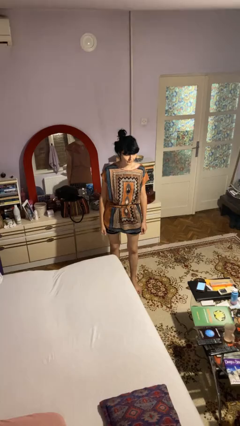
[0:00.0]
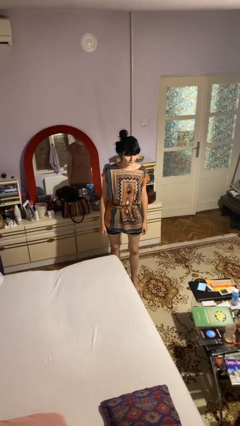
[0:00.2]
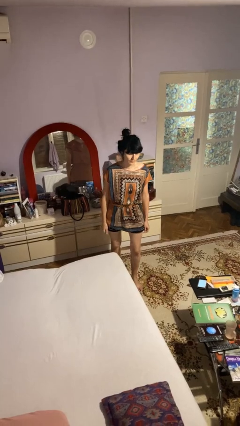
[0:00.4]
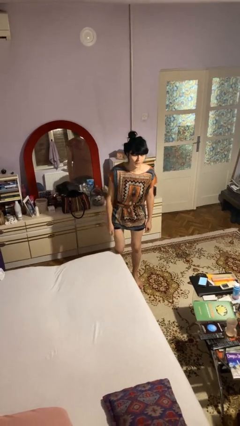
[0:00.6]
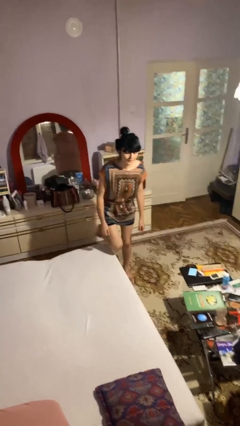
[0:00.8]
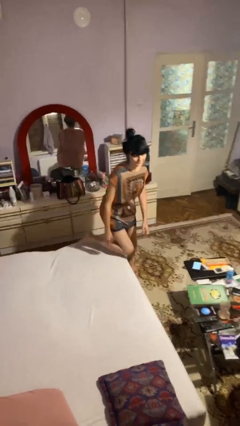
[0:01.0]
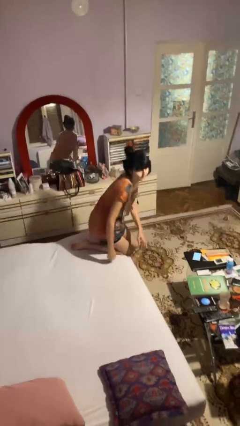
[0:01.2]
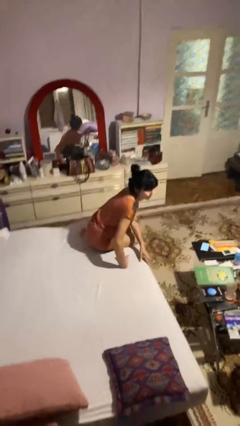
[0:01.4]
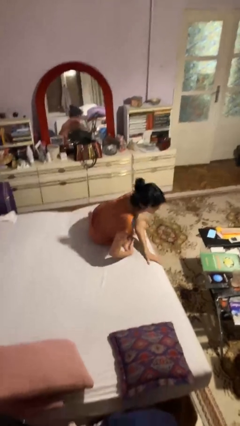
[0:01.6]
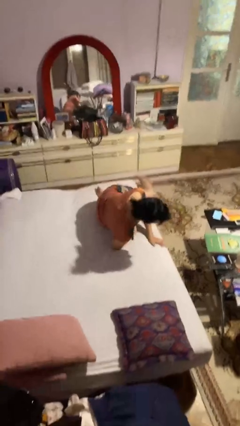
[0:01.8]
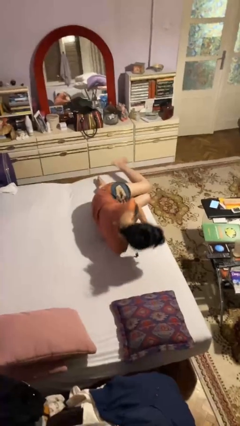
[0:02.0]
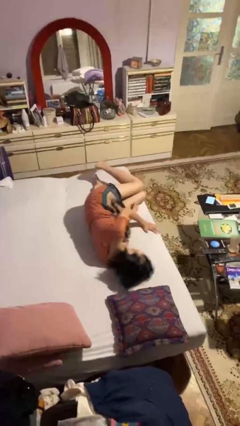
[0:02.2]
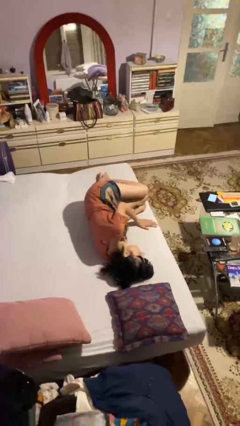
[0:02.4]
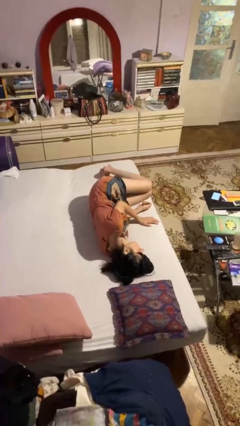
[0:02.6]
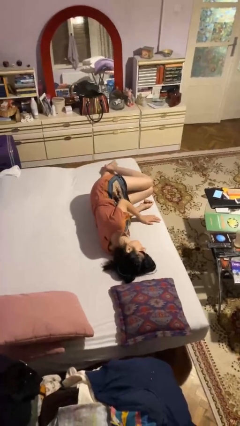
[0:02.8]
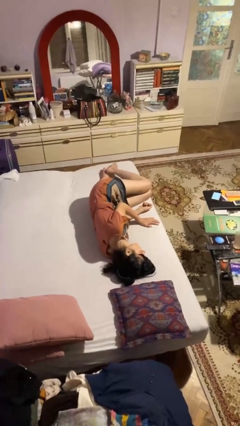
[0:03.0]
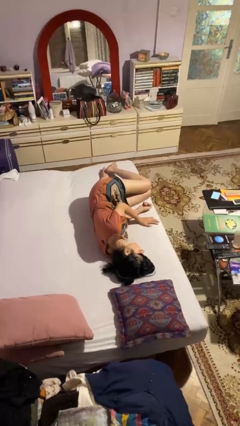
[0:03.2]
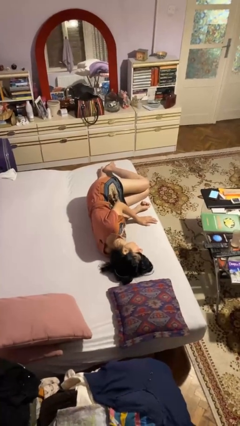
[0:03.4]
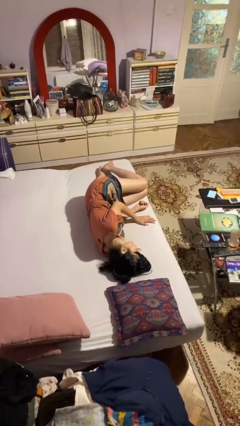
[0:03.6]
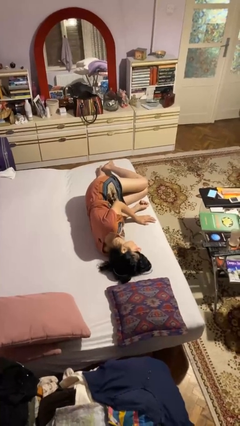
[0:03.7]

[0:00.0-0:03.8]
person lies down on bed

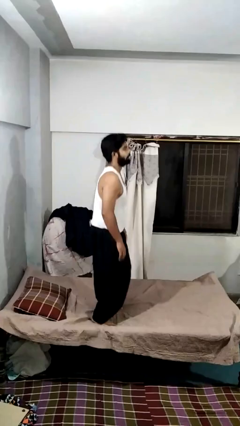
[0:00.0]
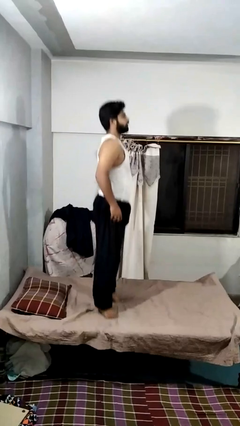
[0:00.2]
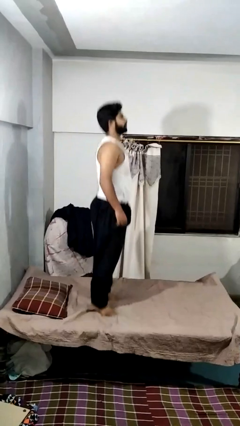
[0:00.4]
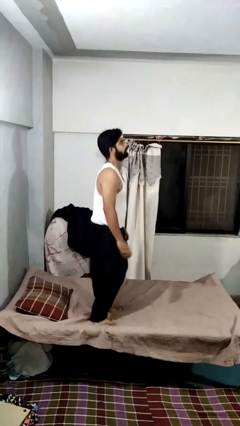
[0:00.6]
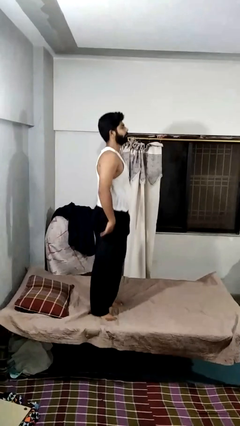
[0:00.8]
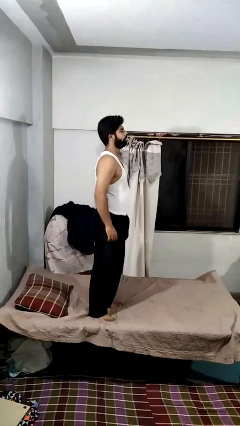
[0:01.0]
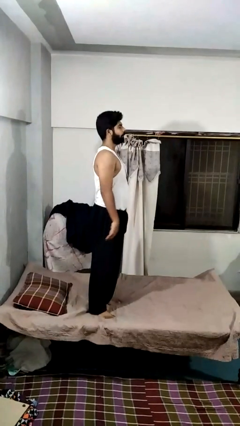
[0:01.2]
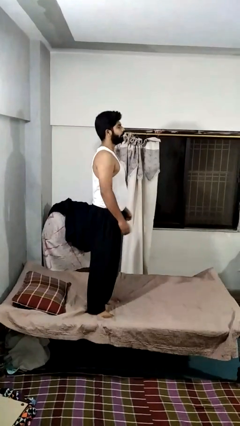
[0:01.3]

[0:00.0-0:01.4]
person jumps on bed

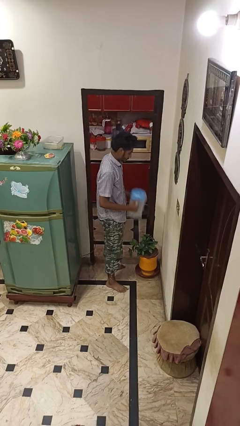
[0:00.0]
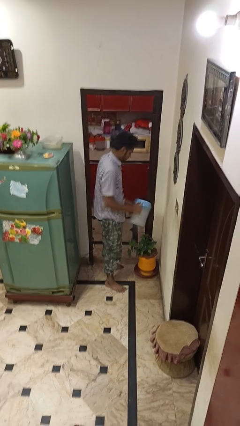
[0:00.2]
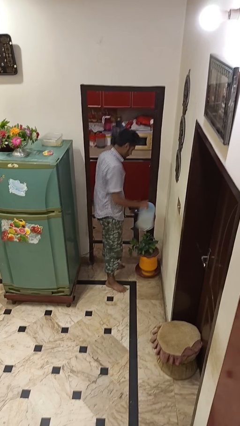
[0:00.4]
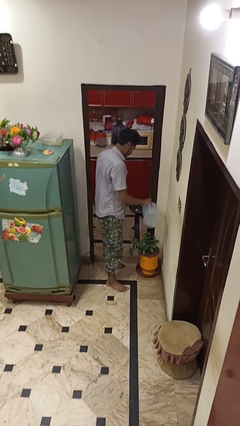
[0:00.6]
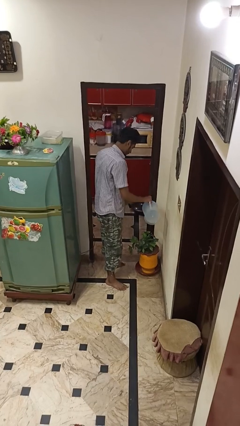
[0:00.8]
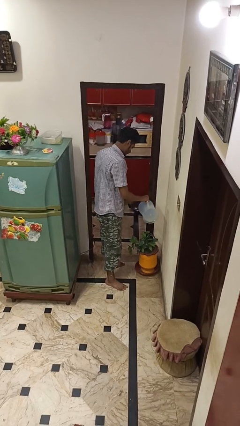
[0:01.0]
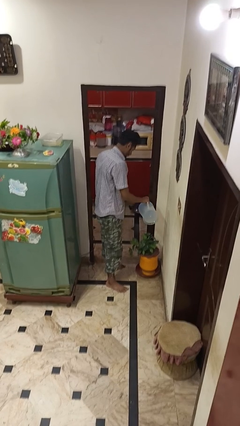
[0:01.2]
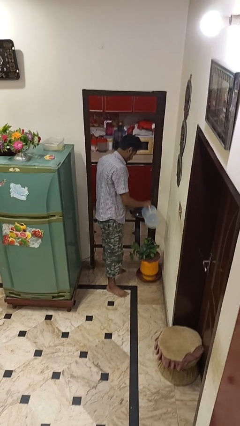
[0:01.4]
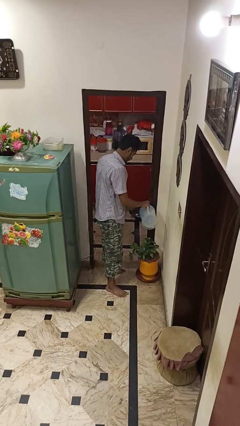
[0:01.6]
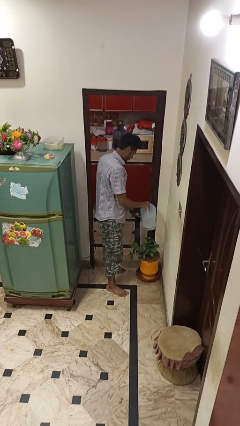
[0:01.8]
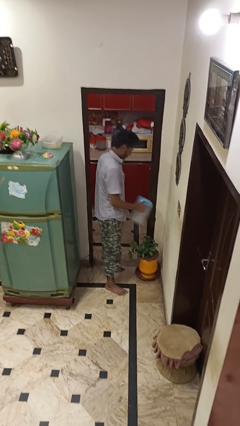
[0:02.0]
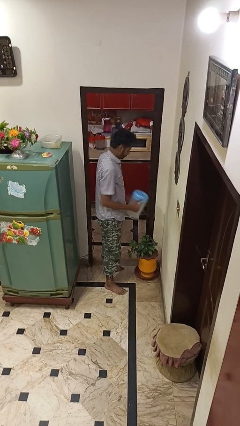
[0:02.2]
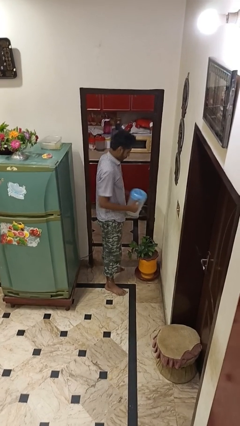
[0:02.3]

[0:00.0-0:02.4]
person waters houseplant

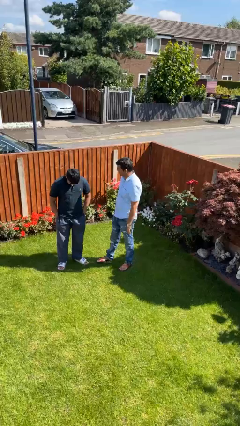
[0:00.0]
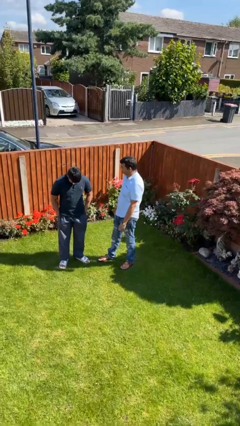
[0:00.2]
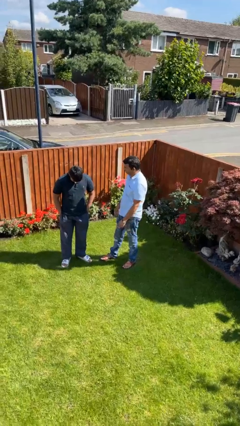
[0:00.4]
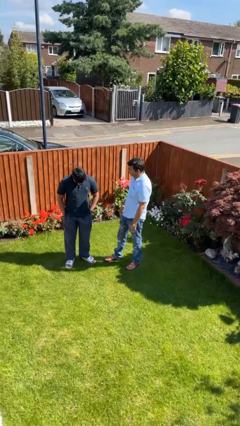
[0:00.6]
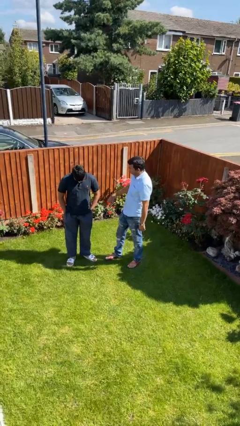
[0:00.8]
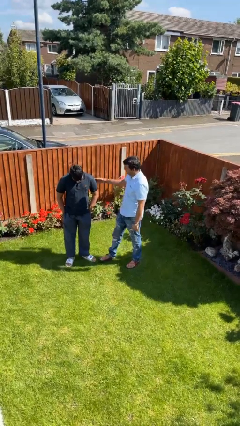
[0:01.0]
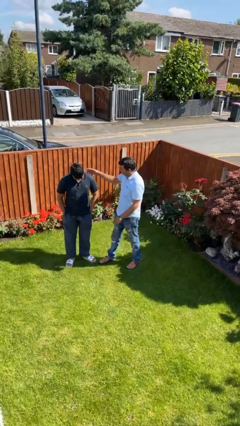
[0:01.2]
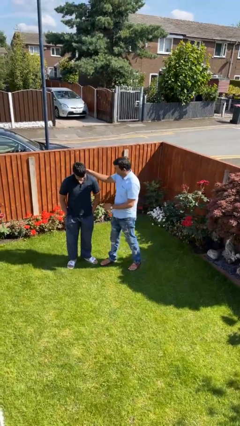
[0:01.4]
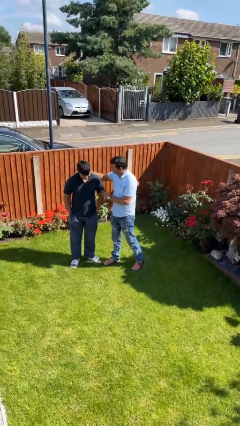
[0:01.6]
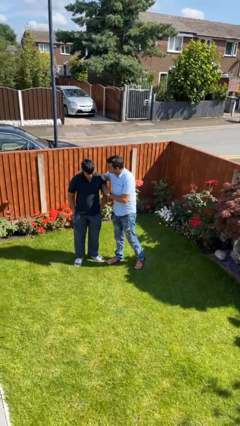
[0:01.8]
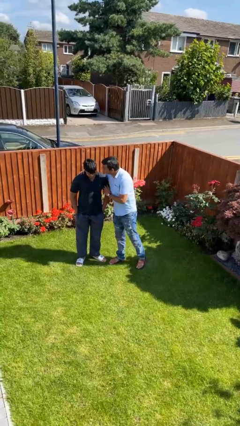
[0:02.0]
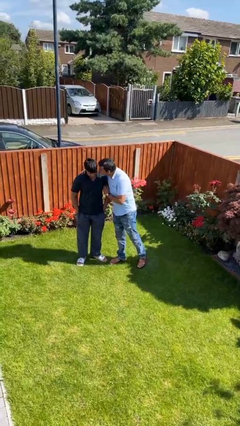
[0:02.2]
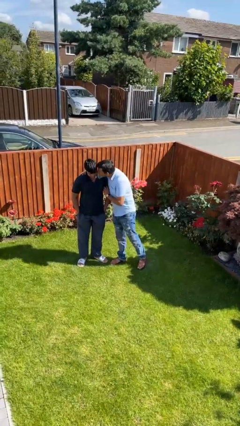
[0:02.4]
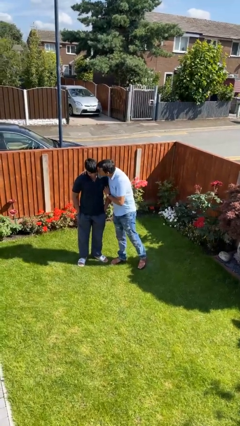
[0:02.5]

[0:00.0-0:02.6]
person kisses cheek of person

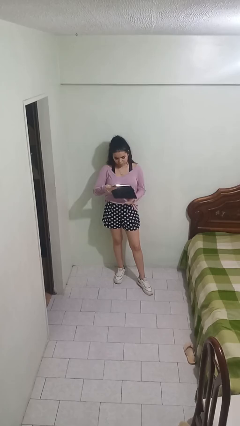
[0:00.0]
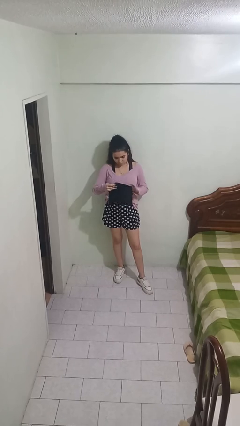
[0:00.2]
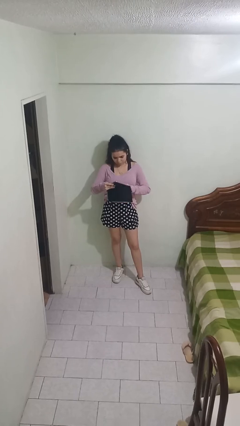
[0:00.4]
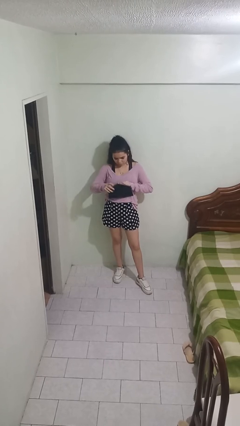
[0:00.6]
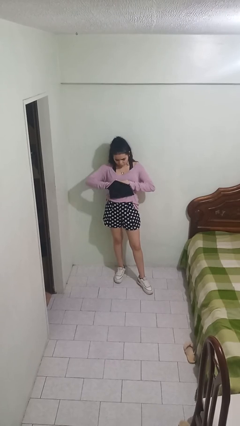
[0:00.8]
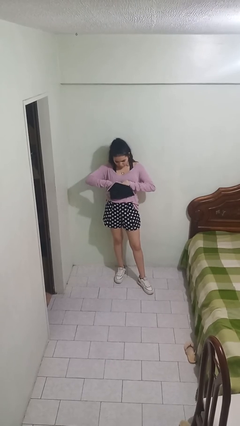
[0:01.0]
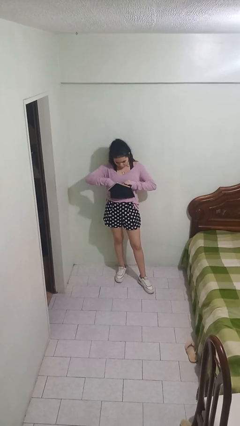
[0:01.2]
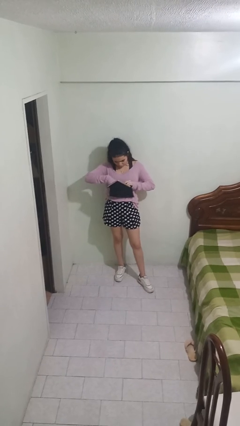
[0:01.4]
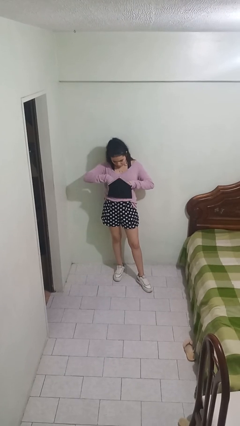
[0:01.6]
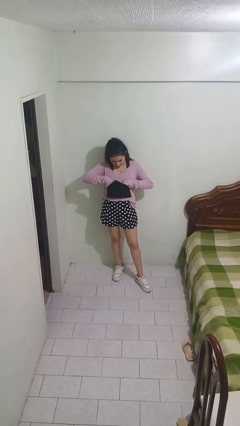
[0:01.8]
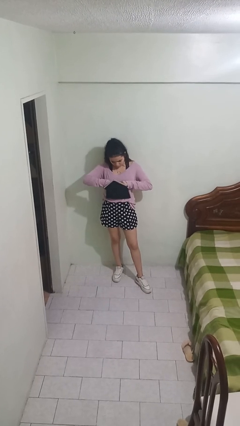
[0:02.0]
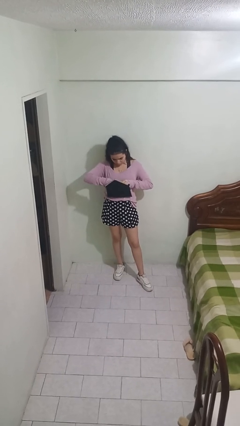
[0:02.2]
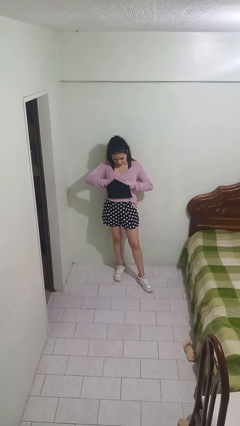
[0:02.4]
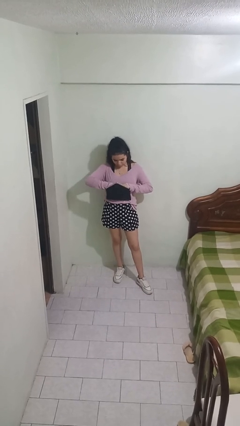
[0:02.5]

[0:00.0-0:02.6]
person searches in purse

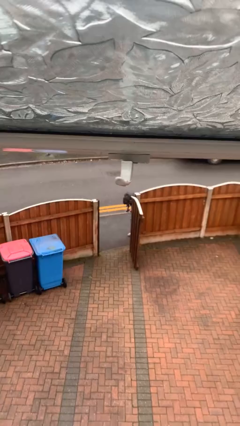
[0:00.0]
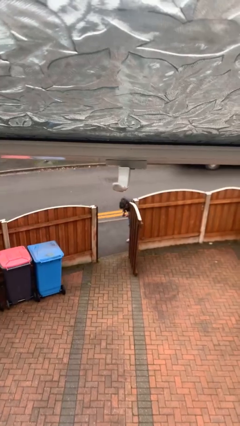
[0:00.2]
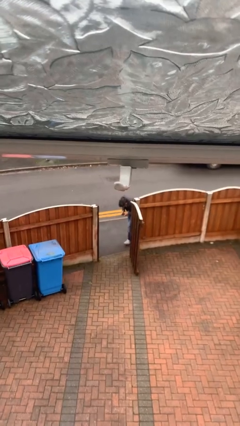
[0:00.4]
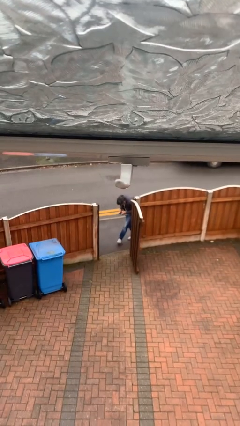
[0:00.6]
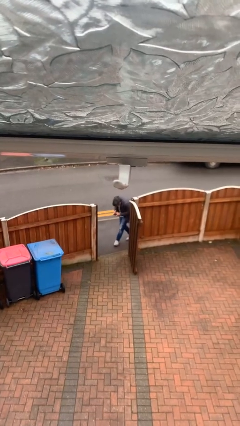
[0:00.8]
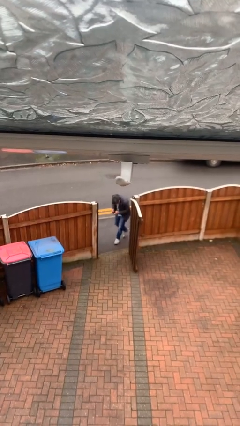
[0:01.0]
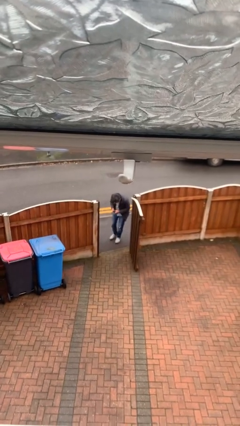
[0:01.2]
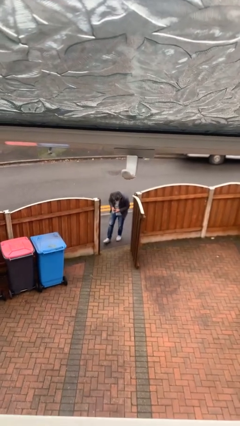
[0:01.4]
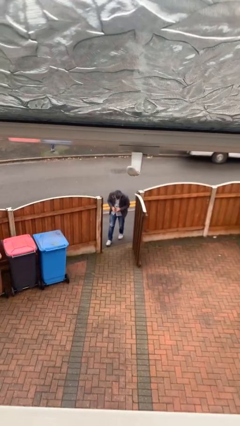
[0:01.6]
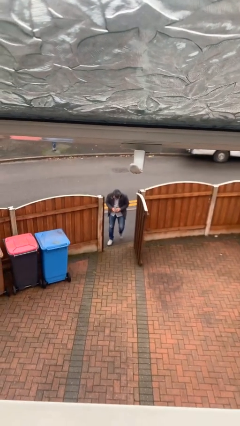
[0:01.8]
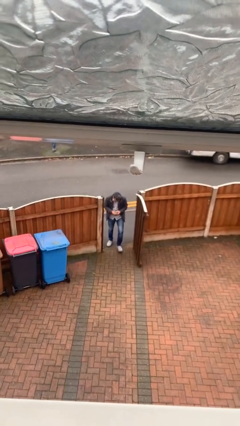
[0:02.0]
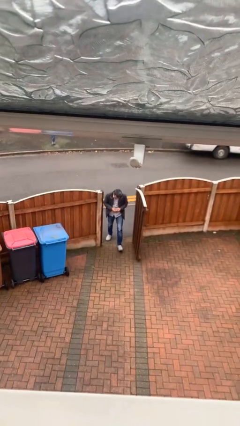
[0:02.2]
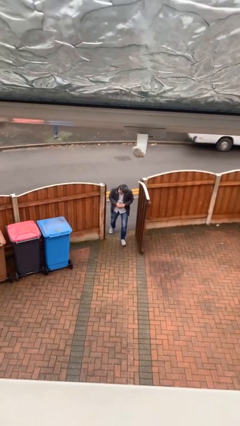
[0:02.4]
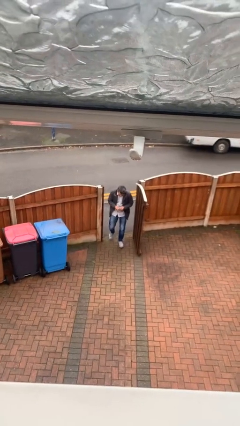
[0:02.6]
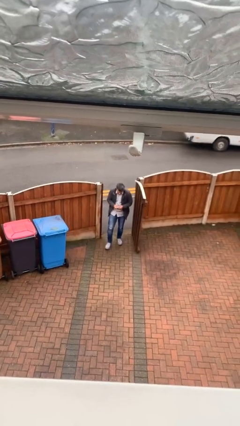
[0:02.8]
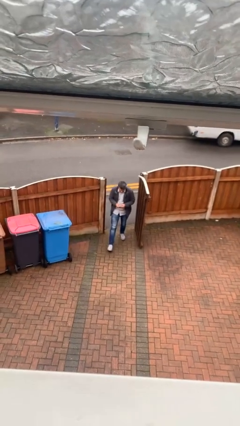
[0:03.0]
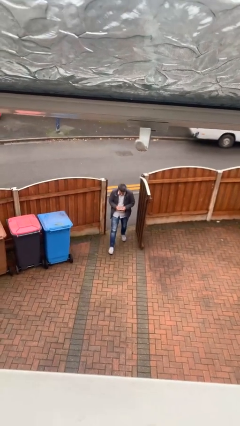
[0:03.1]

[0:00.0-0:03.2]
person enters scene through structure

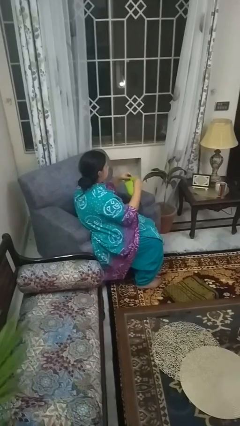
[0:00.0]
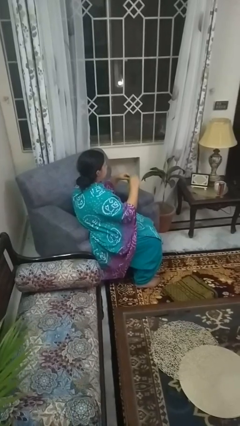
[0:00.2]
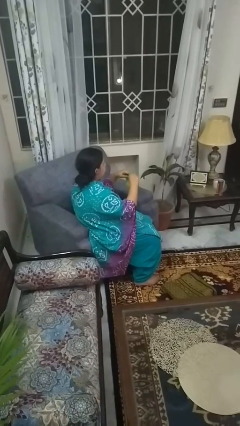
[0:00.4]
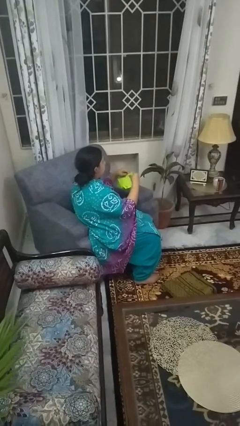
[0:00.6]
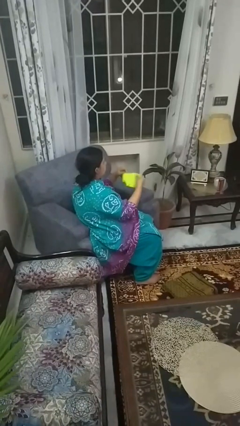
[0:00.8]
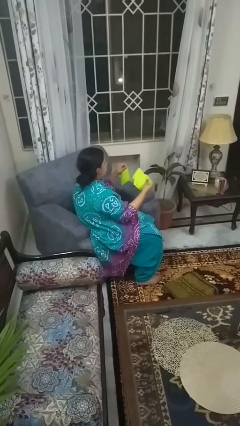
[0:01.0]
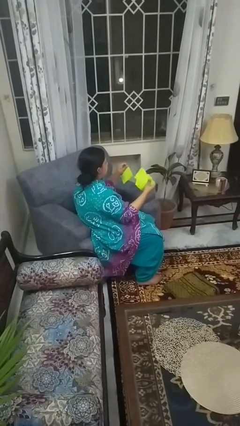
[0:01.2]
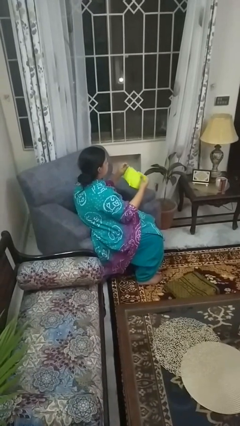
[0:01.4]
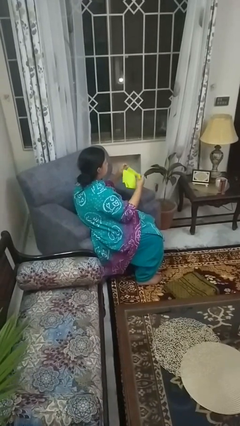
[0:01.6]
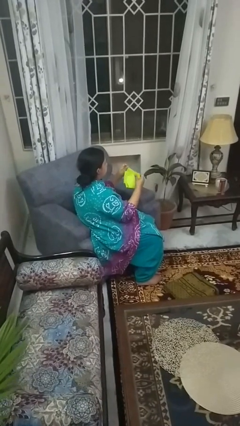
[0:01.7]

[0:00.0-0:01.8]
person tears paper
